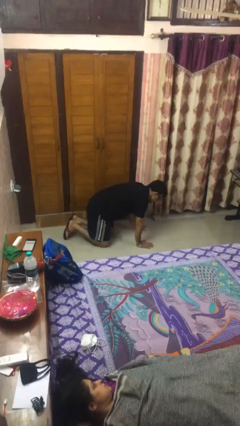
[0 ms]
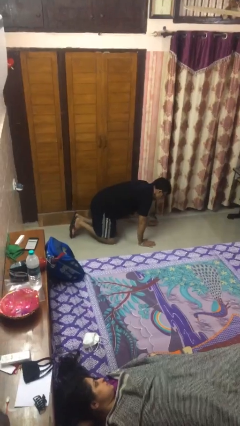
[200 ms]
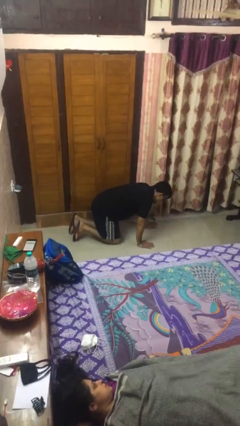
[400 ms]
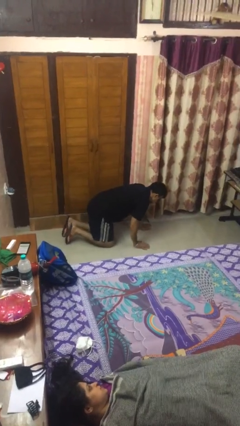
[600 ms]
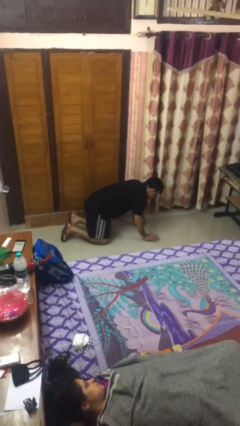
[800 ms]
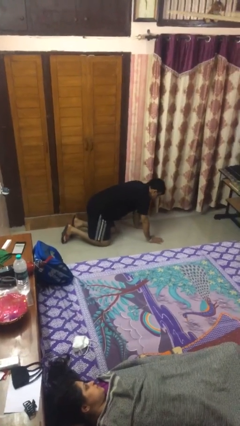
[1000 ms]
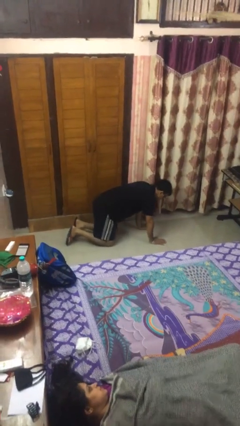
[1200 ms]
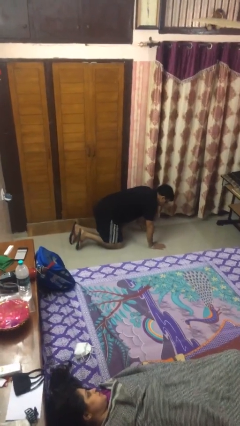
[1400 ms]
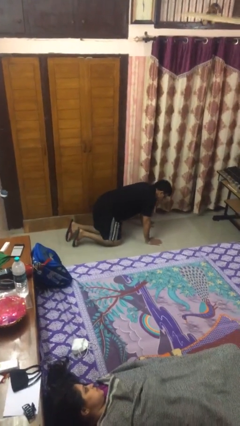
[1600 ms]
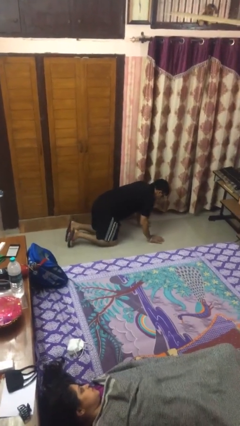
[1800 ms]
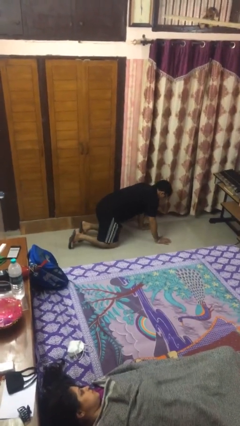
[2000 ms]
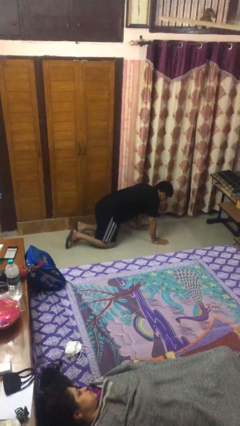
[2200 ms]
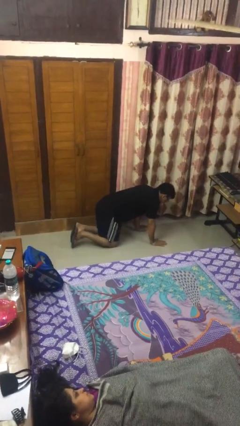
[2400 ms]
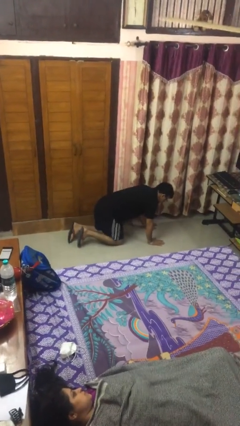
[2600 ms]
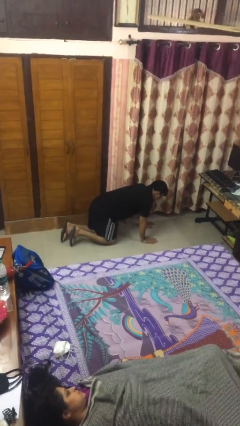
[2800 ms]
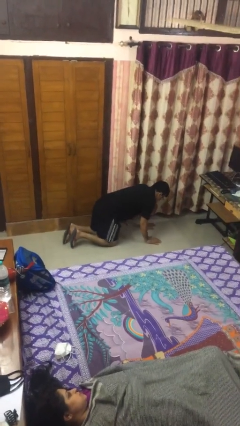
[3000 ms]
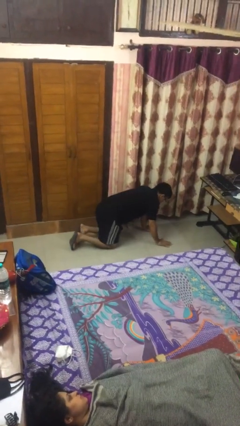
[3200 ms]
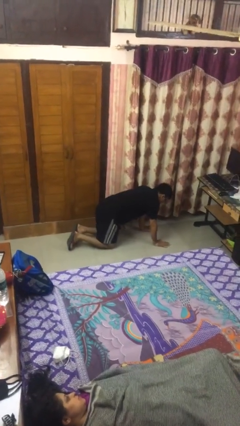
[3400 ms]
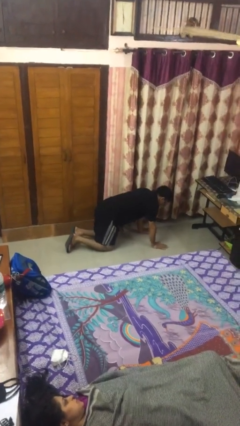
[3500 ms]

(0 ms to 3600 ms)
person crawls

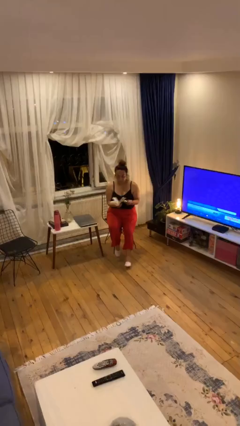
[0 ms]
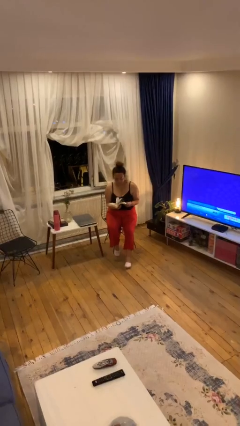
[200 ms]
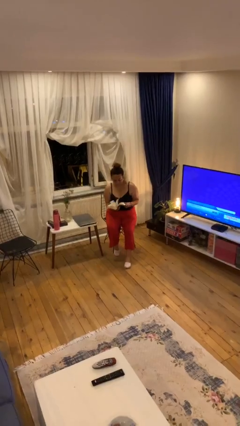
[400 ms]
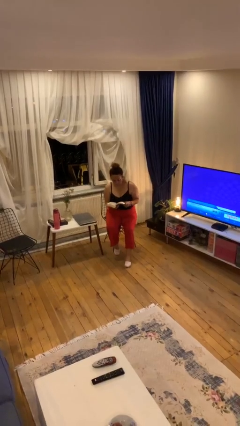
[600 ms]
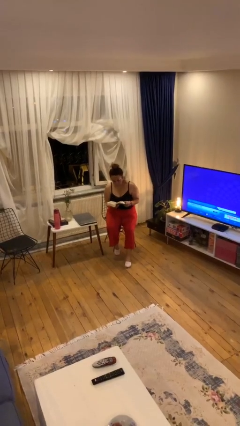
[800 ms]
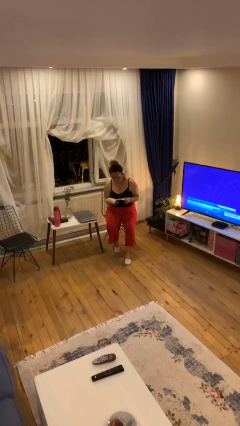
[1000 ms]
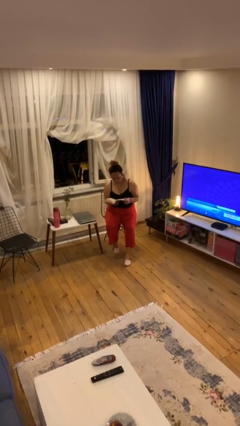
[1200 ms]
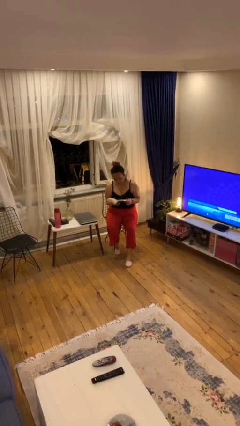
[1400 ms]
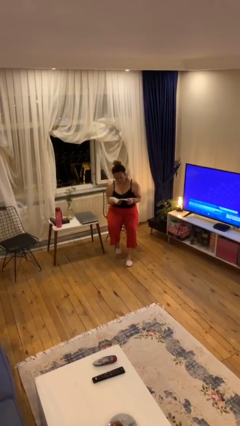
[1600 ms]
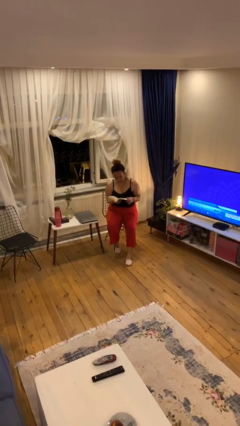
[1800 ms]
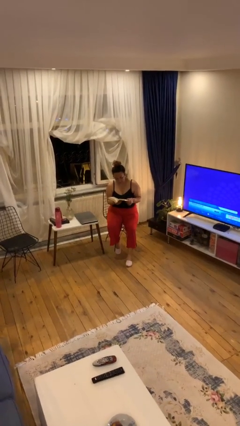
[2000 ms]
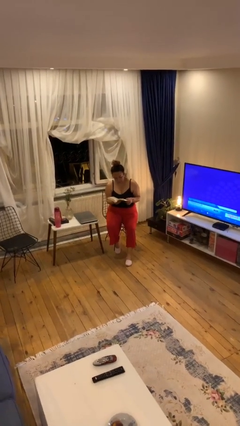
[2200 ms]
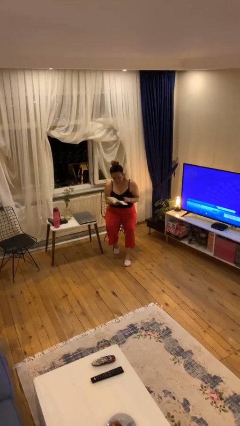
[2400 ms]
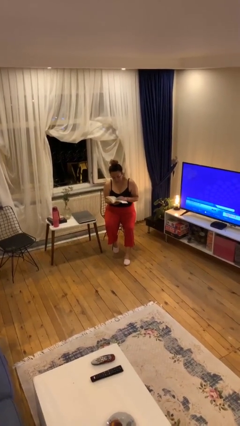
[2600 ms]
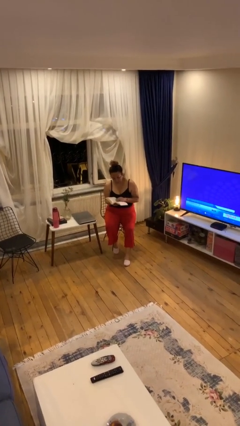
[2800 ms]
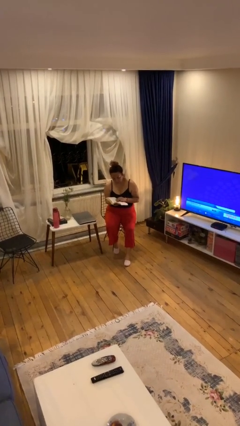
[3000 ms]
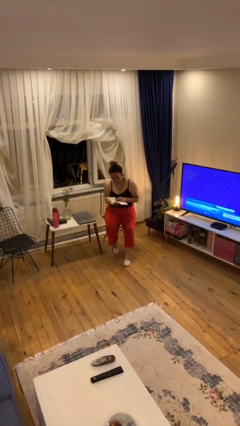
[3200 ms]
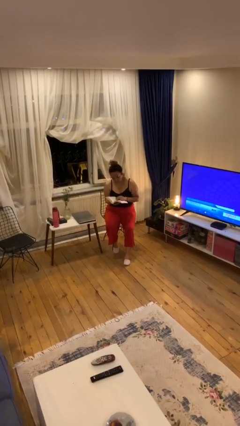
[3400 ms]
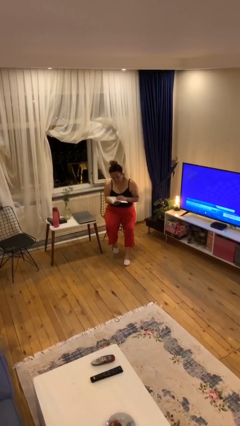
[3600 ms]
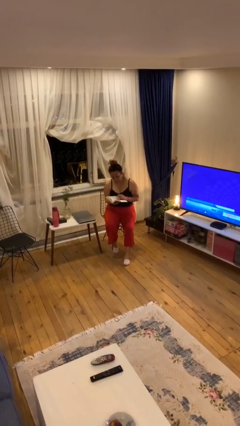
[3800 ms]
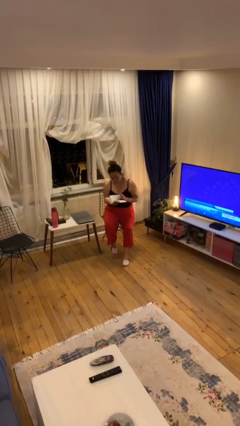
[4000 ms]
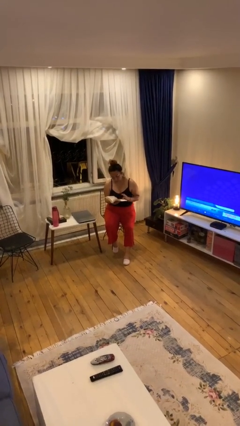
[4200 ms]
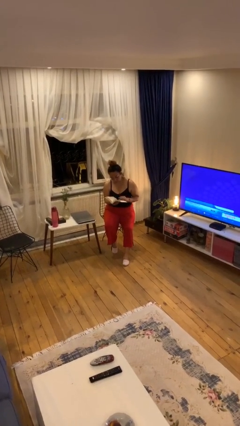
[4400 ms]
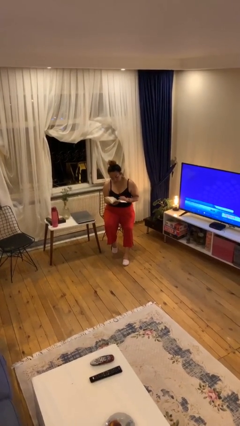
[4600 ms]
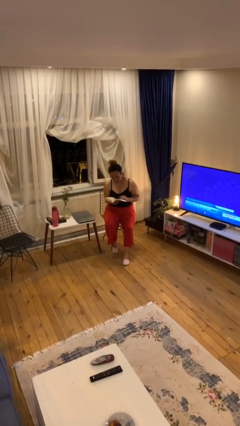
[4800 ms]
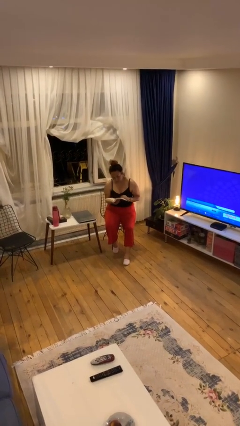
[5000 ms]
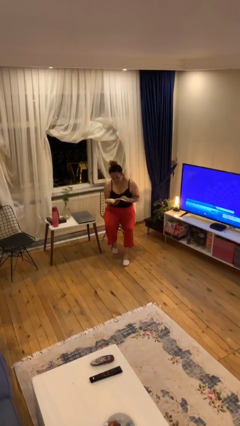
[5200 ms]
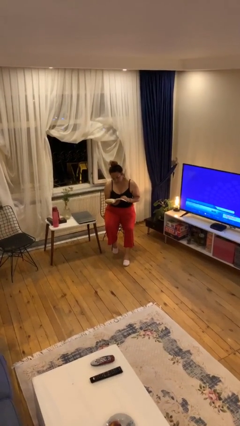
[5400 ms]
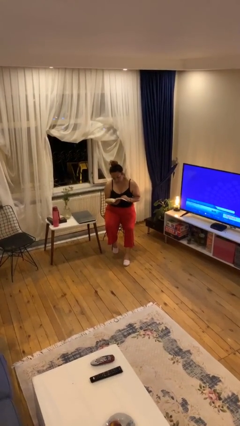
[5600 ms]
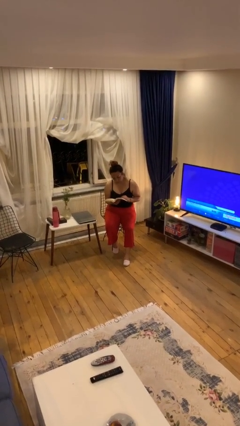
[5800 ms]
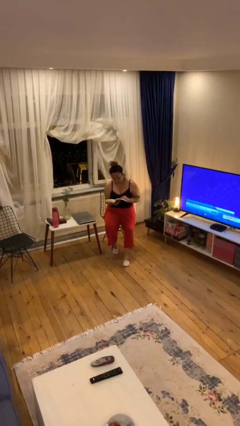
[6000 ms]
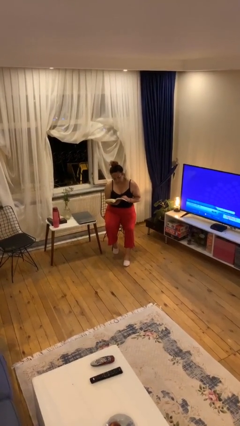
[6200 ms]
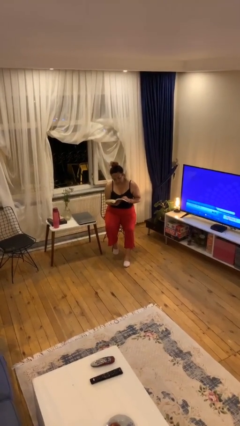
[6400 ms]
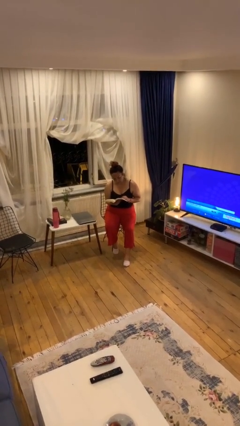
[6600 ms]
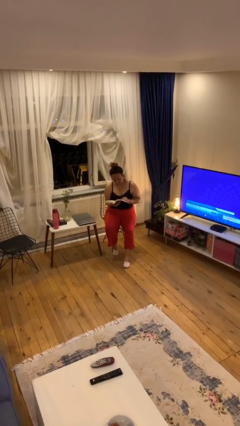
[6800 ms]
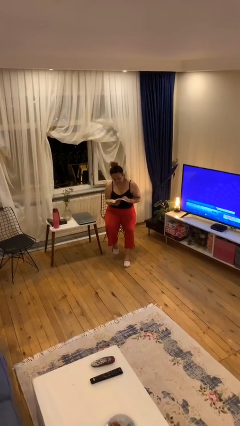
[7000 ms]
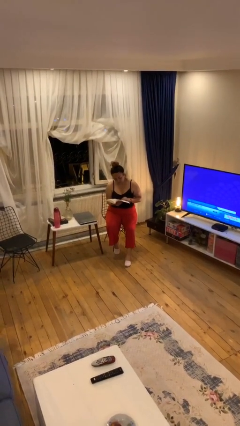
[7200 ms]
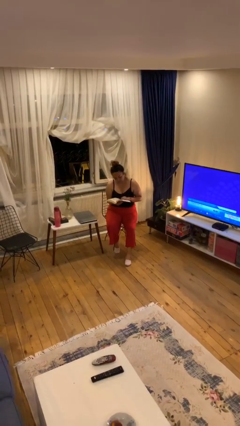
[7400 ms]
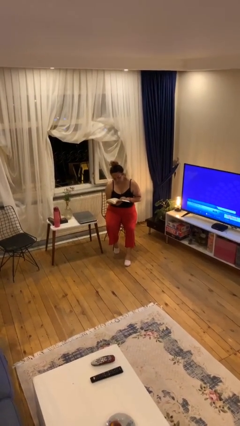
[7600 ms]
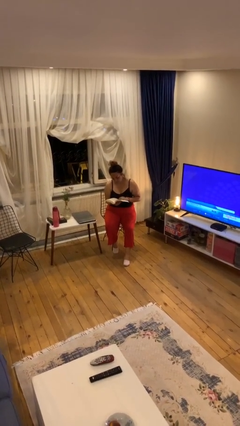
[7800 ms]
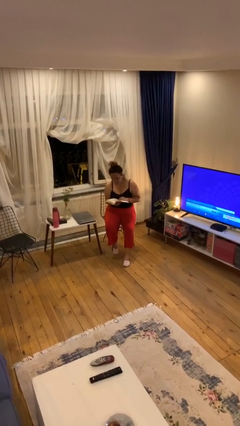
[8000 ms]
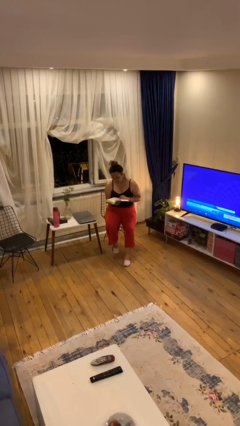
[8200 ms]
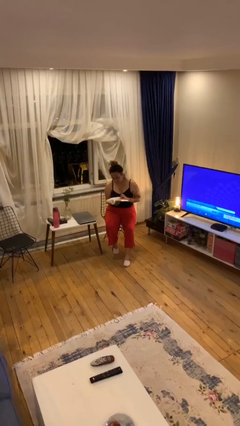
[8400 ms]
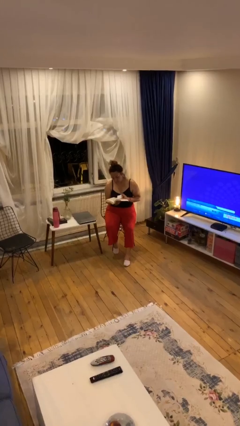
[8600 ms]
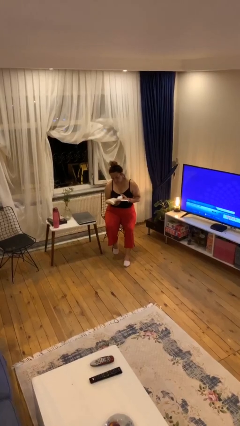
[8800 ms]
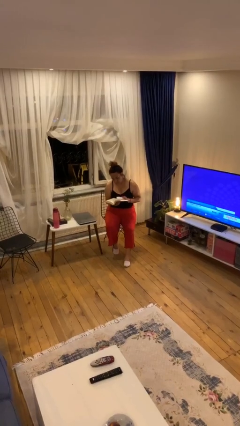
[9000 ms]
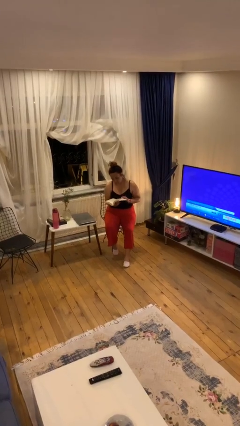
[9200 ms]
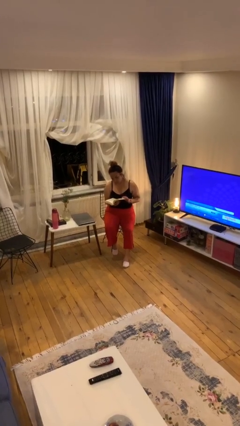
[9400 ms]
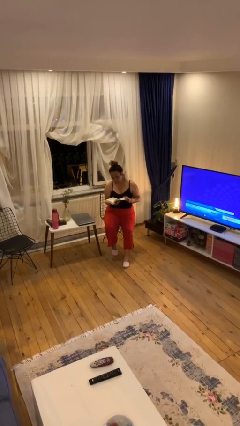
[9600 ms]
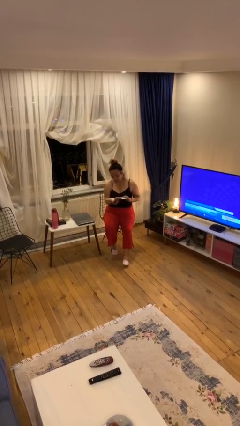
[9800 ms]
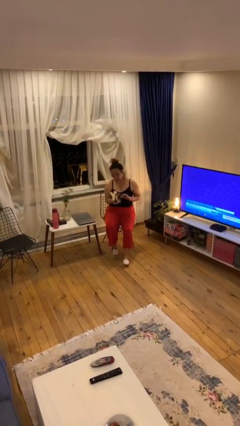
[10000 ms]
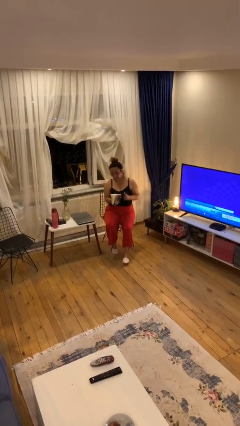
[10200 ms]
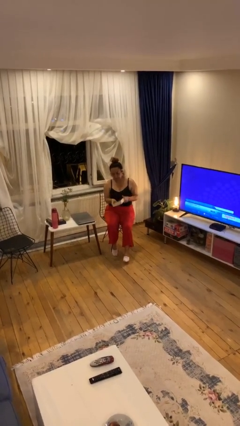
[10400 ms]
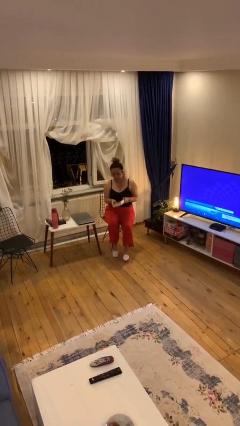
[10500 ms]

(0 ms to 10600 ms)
person reads document

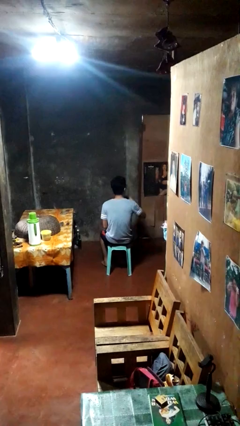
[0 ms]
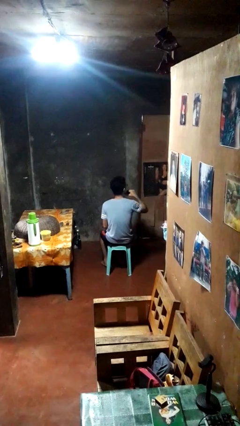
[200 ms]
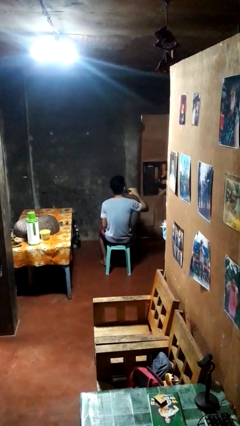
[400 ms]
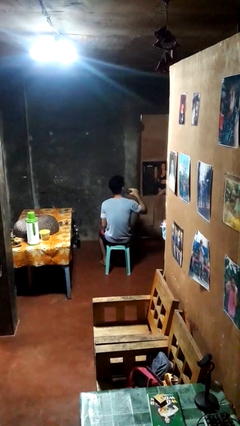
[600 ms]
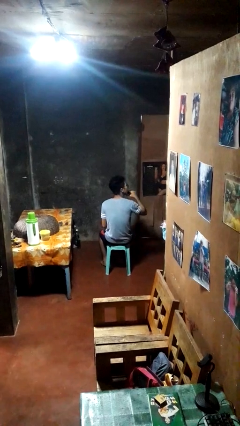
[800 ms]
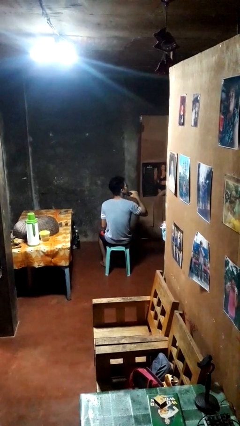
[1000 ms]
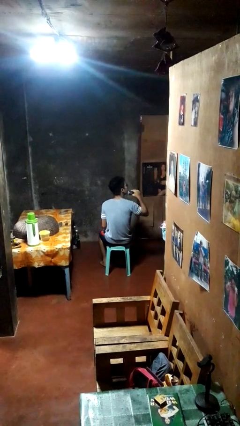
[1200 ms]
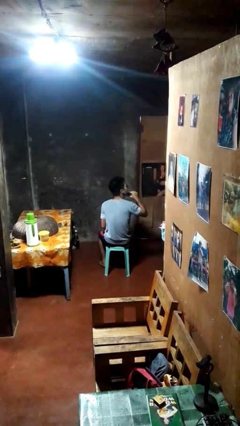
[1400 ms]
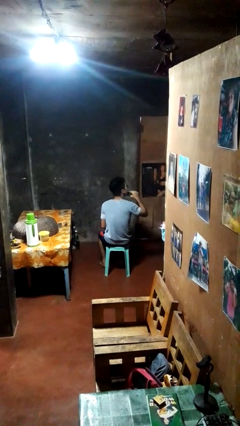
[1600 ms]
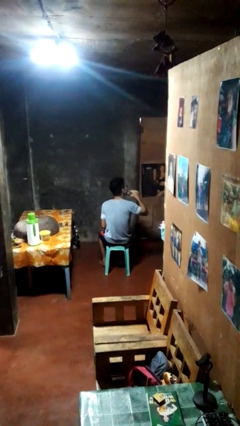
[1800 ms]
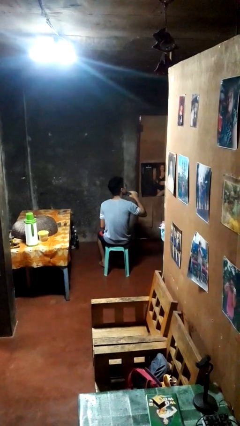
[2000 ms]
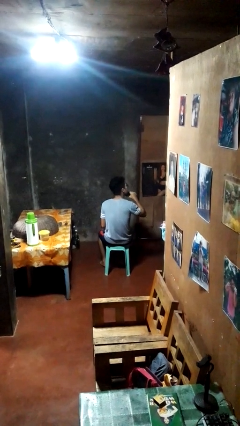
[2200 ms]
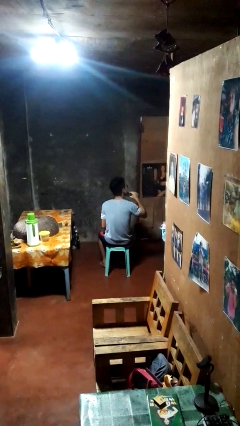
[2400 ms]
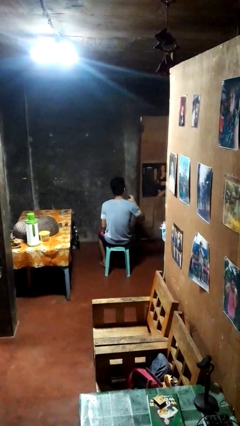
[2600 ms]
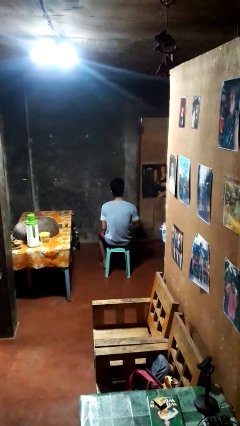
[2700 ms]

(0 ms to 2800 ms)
person shaves face

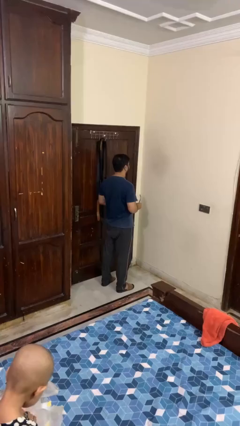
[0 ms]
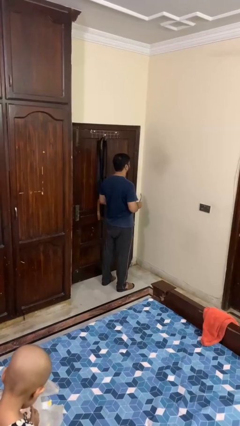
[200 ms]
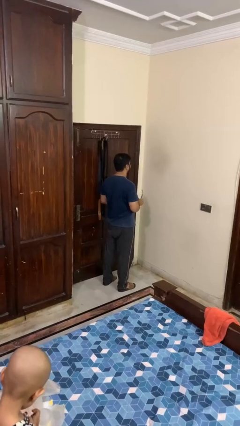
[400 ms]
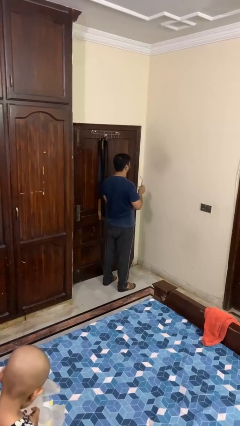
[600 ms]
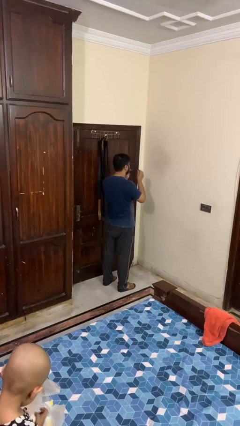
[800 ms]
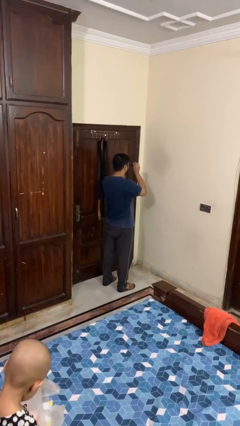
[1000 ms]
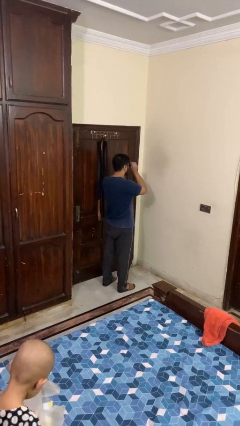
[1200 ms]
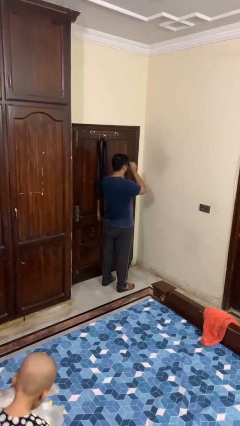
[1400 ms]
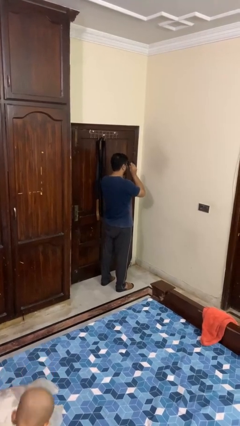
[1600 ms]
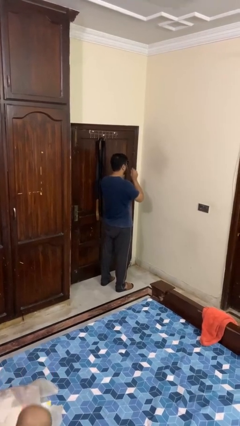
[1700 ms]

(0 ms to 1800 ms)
person puts on sunglasses
